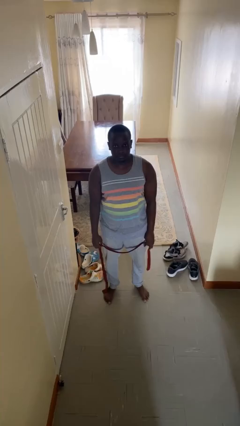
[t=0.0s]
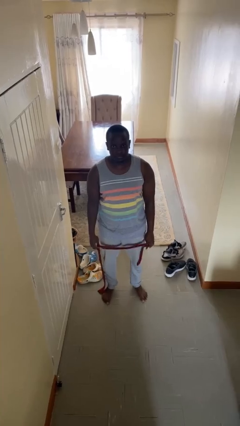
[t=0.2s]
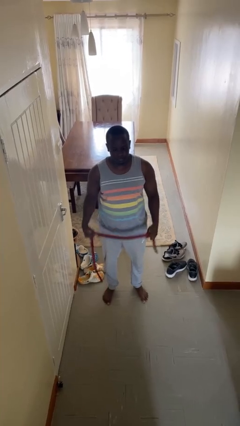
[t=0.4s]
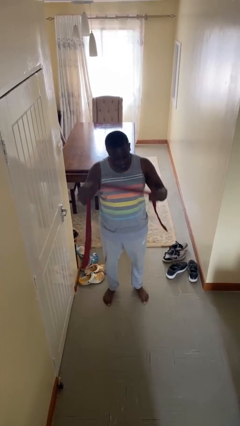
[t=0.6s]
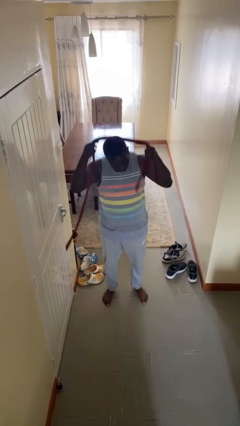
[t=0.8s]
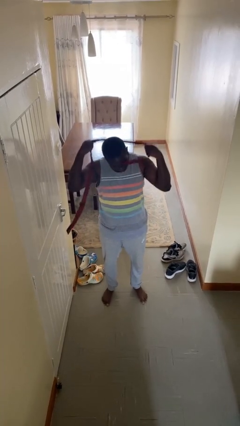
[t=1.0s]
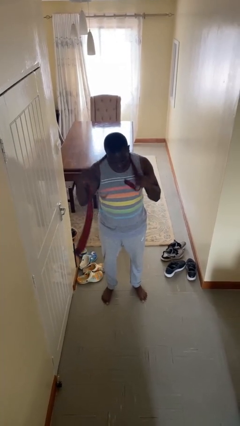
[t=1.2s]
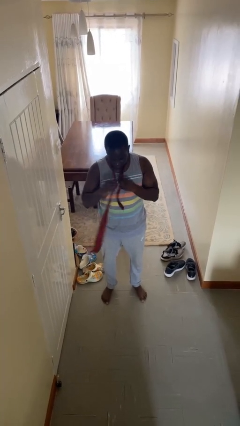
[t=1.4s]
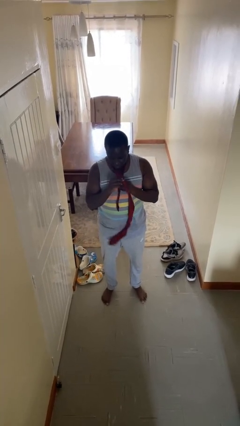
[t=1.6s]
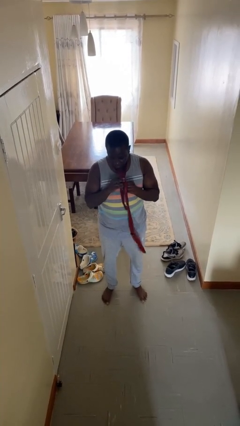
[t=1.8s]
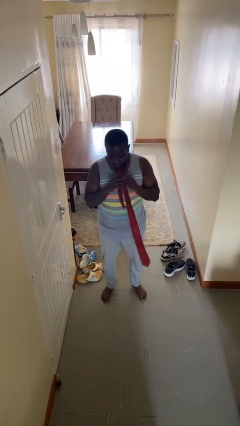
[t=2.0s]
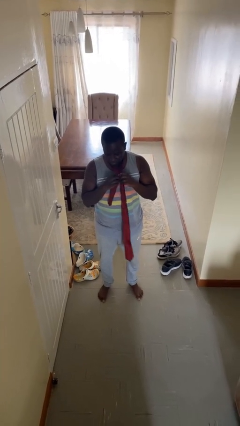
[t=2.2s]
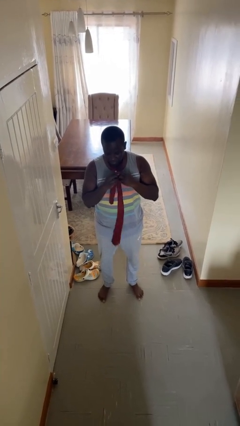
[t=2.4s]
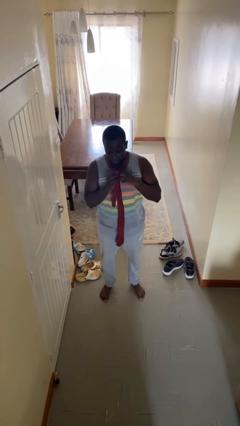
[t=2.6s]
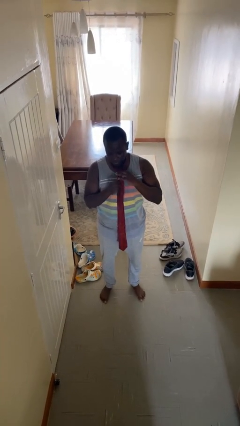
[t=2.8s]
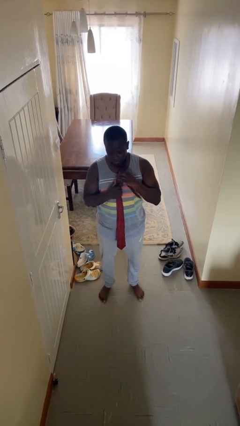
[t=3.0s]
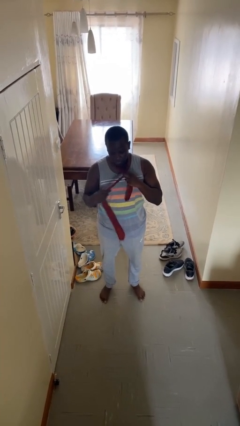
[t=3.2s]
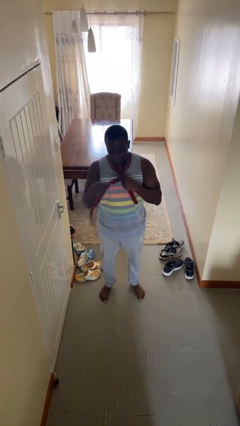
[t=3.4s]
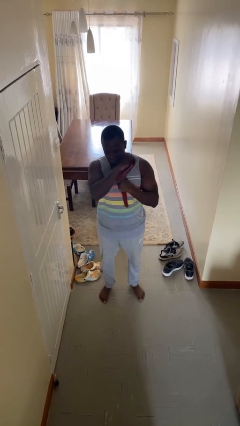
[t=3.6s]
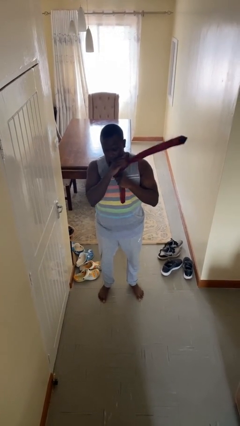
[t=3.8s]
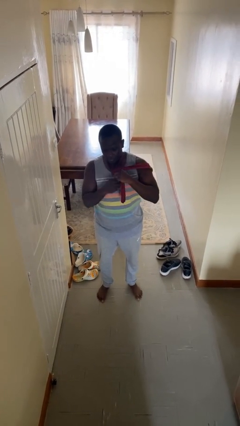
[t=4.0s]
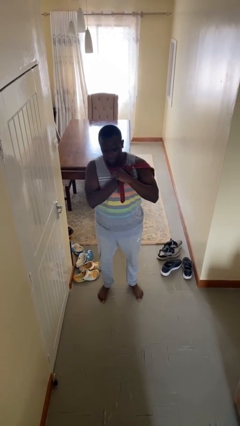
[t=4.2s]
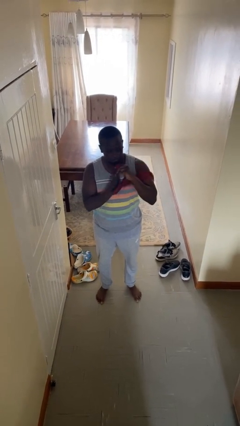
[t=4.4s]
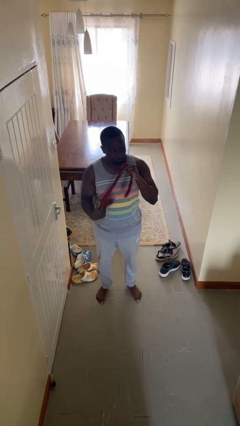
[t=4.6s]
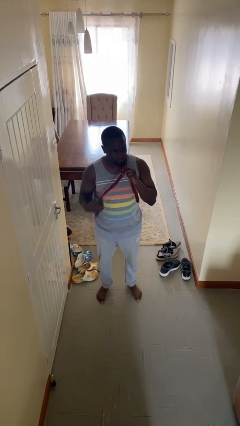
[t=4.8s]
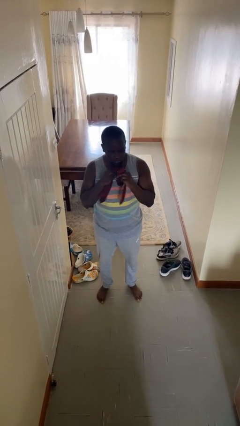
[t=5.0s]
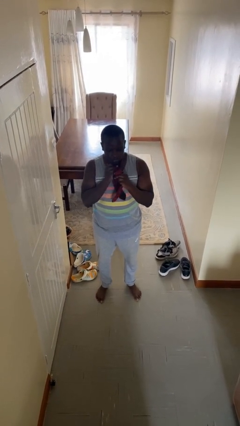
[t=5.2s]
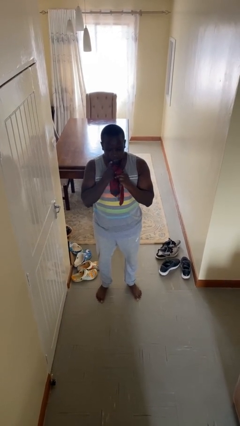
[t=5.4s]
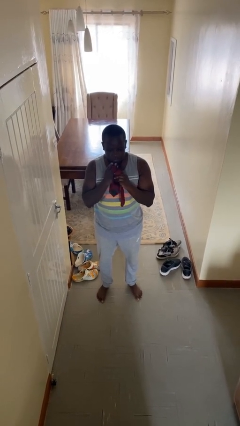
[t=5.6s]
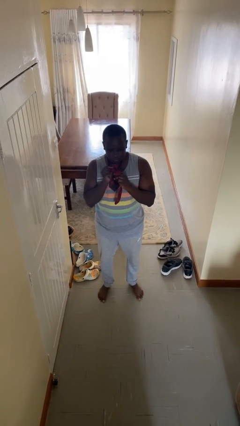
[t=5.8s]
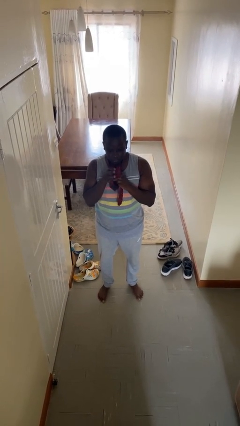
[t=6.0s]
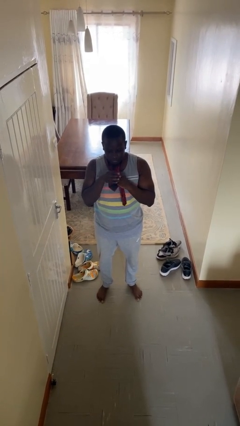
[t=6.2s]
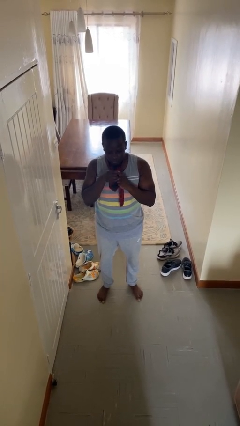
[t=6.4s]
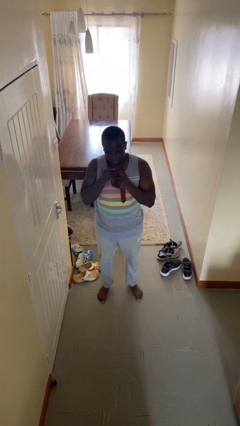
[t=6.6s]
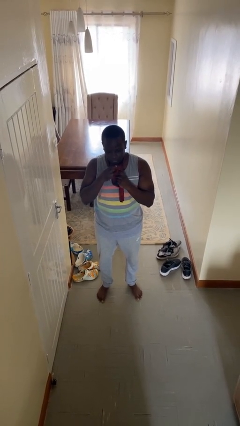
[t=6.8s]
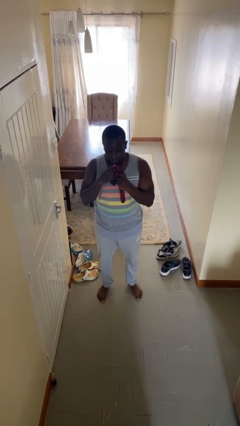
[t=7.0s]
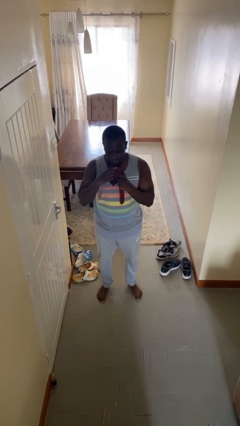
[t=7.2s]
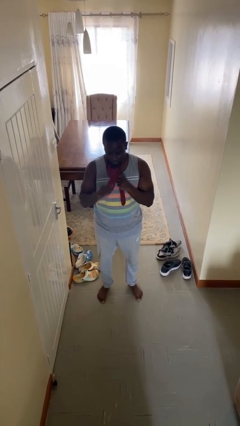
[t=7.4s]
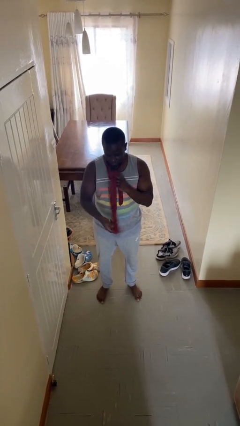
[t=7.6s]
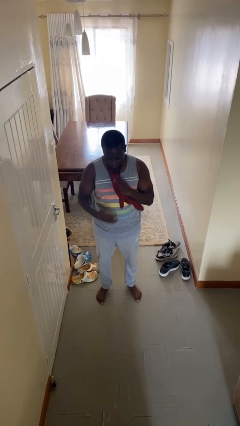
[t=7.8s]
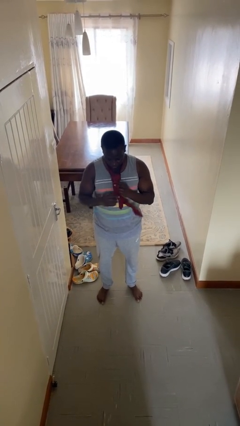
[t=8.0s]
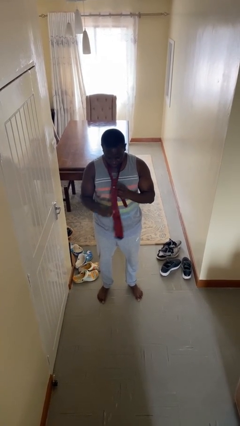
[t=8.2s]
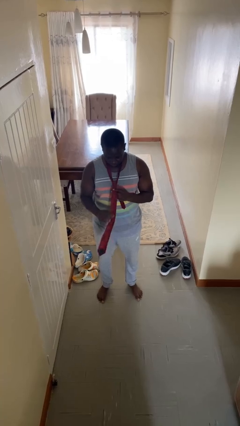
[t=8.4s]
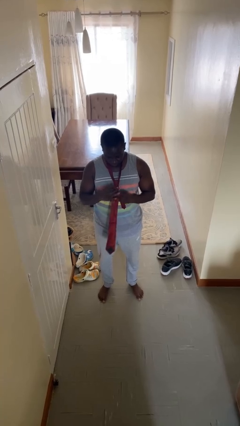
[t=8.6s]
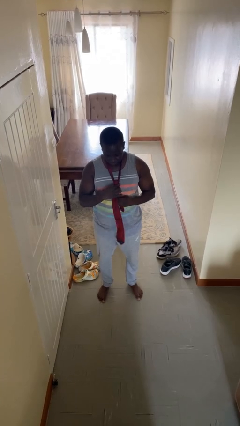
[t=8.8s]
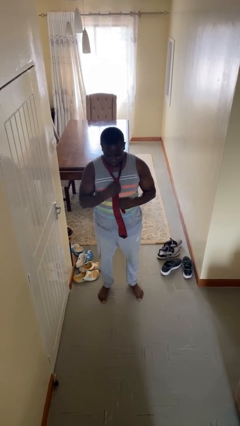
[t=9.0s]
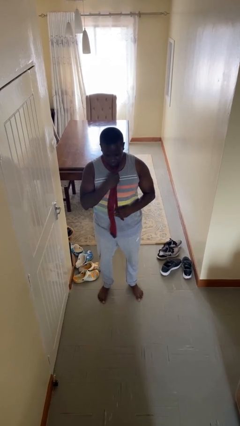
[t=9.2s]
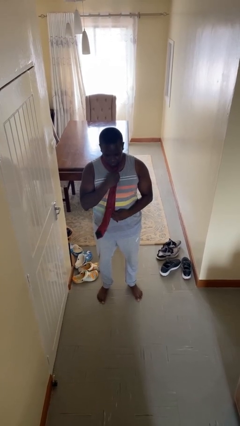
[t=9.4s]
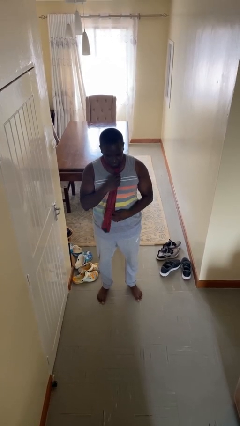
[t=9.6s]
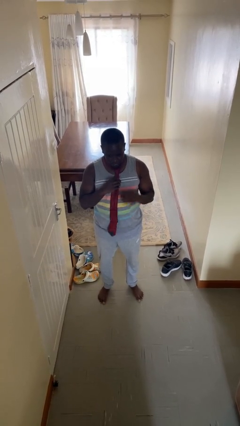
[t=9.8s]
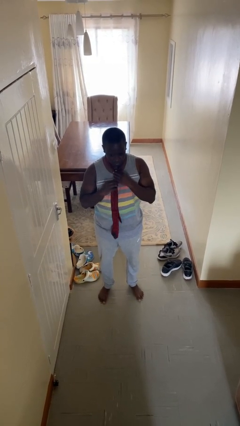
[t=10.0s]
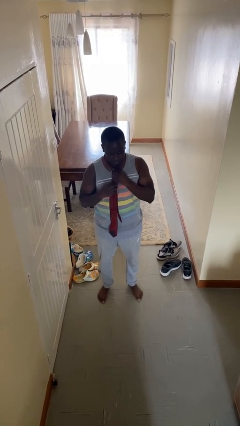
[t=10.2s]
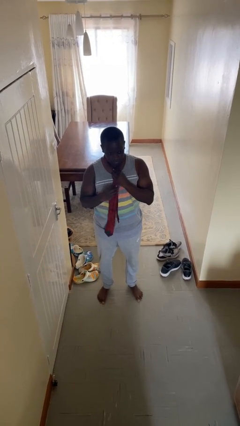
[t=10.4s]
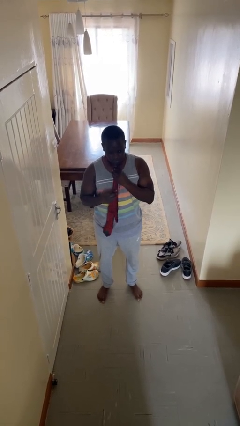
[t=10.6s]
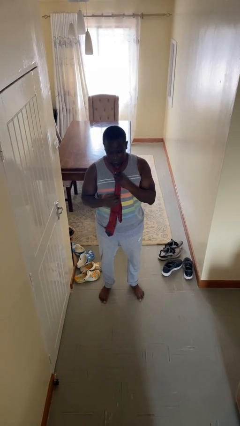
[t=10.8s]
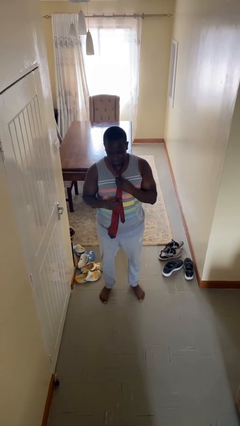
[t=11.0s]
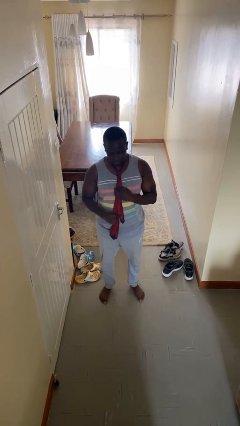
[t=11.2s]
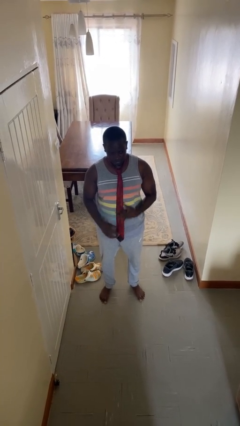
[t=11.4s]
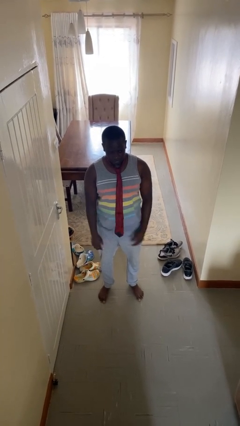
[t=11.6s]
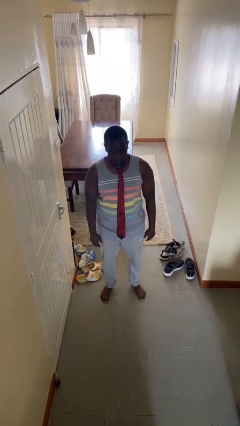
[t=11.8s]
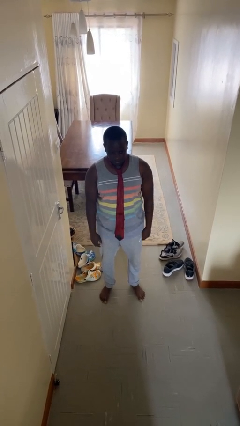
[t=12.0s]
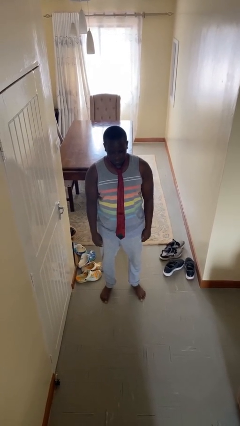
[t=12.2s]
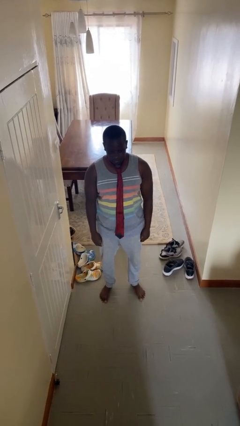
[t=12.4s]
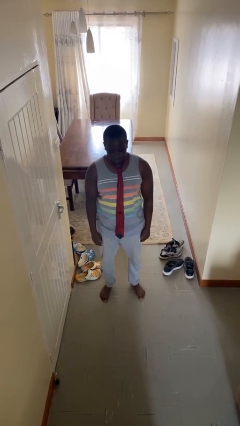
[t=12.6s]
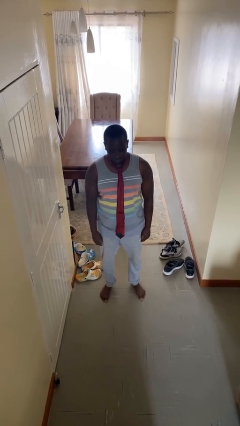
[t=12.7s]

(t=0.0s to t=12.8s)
person puts on necktie

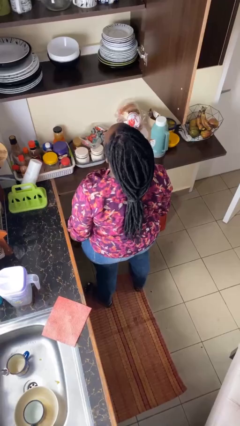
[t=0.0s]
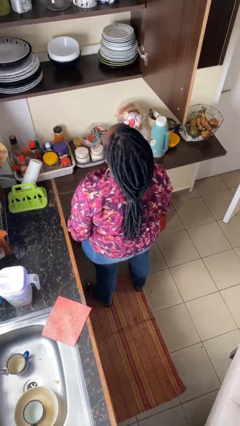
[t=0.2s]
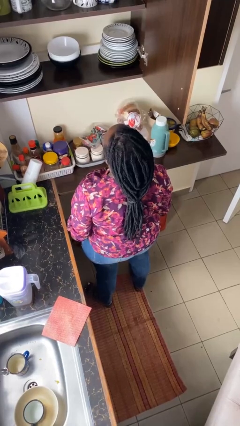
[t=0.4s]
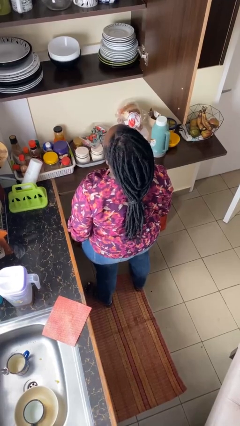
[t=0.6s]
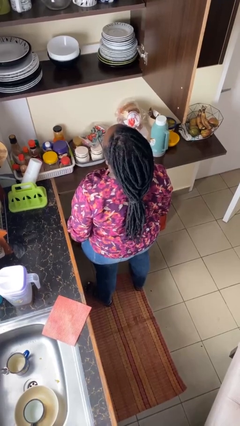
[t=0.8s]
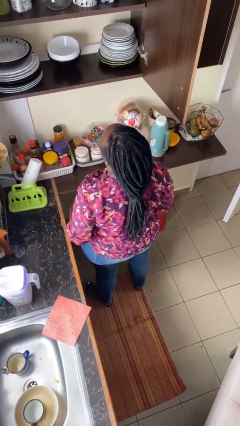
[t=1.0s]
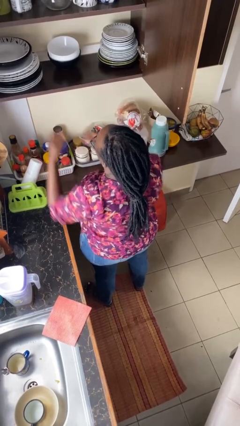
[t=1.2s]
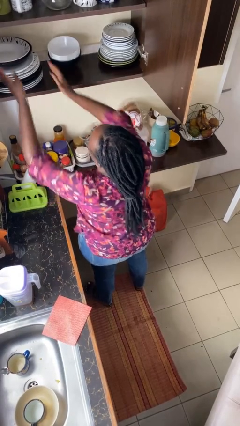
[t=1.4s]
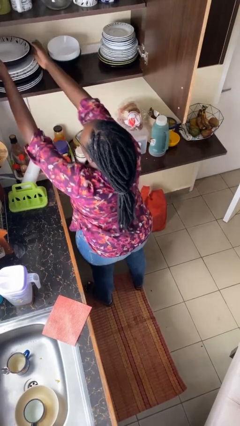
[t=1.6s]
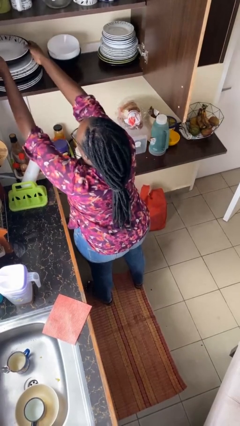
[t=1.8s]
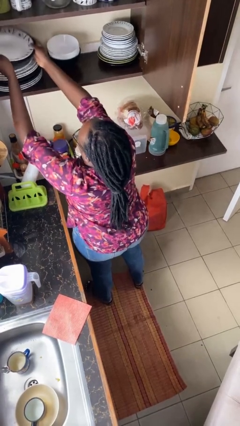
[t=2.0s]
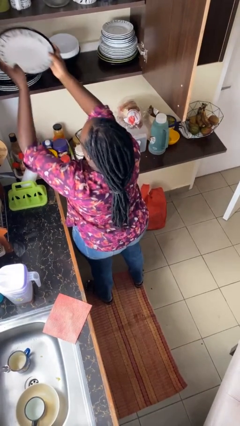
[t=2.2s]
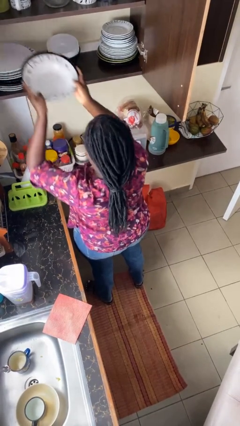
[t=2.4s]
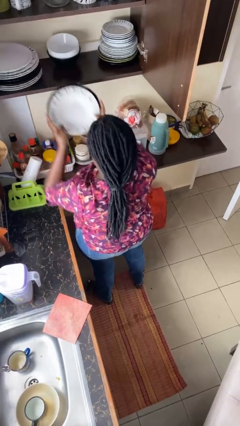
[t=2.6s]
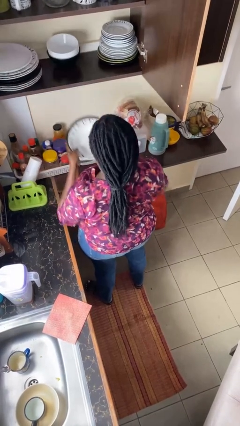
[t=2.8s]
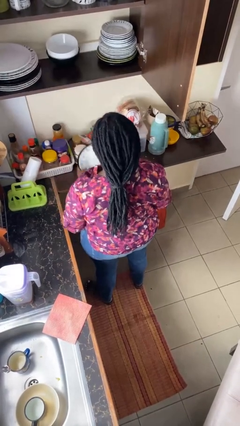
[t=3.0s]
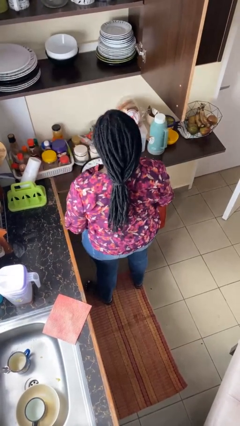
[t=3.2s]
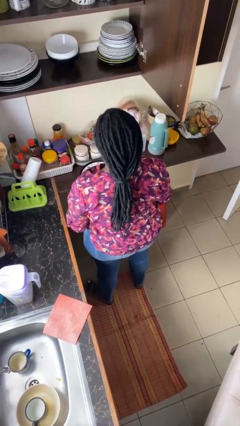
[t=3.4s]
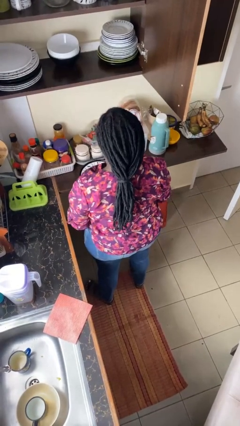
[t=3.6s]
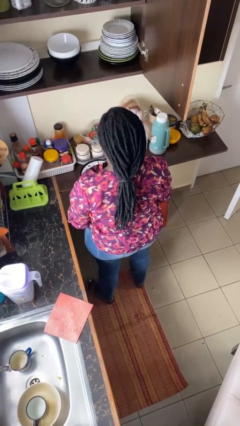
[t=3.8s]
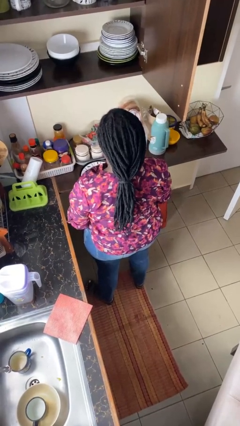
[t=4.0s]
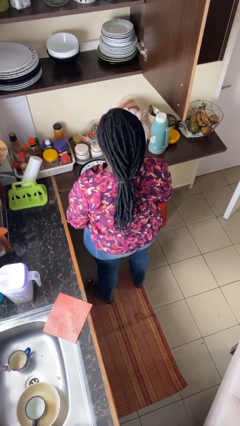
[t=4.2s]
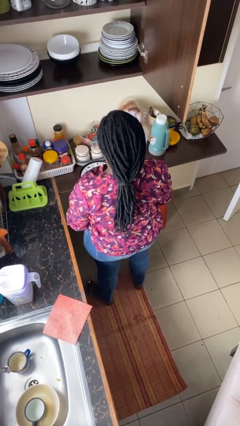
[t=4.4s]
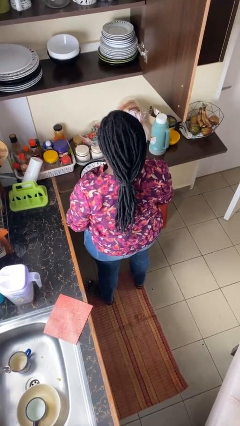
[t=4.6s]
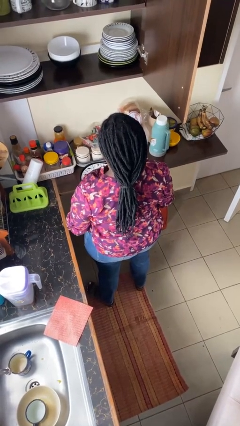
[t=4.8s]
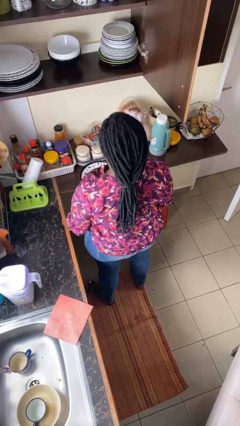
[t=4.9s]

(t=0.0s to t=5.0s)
person takes object from cabinet
